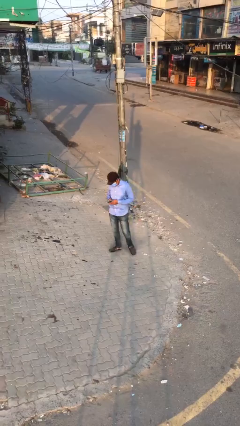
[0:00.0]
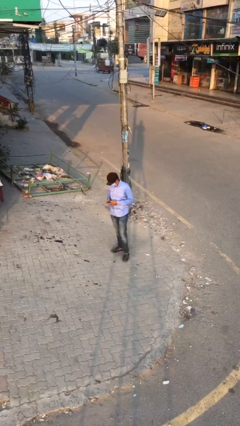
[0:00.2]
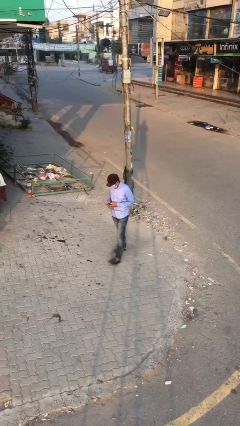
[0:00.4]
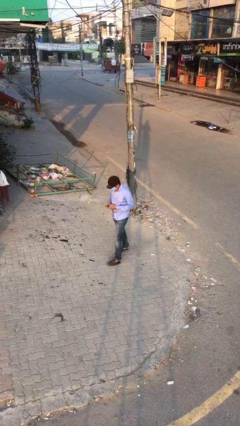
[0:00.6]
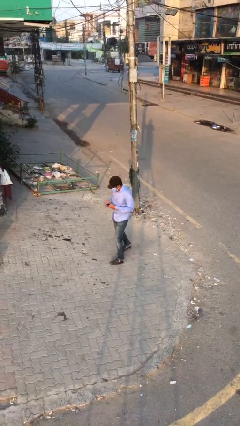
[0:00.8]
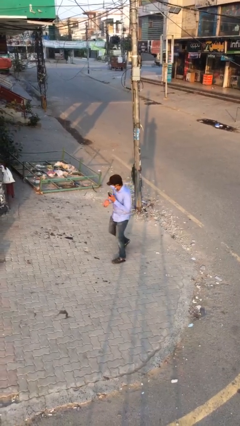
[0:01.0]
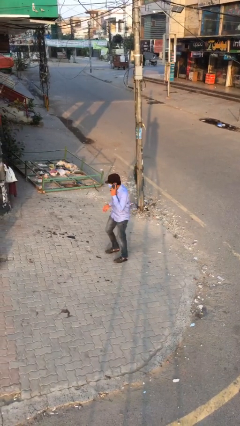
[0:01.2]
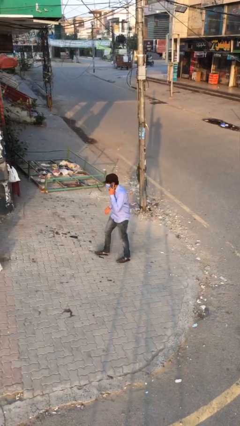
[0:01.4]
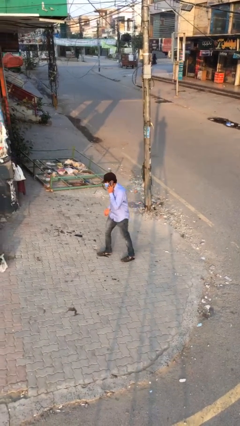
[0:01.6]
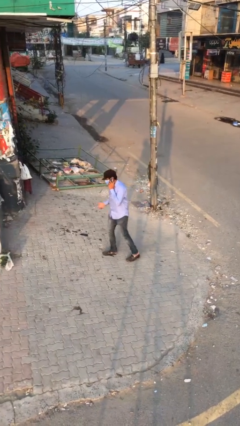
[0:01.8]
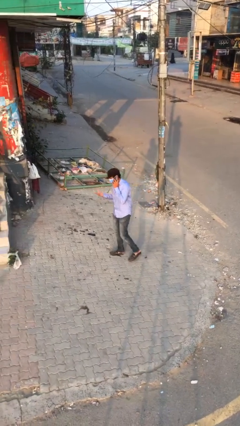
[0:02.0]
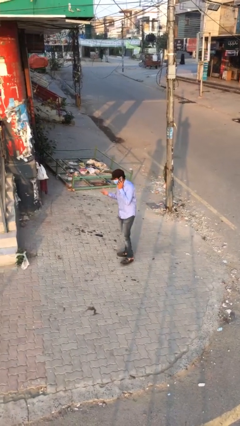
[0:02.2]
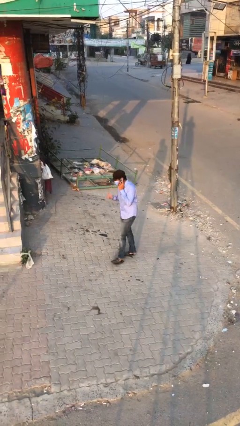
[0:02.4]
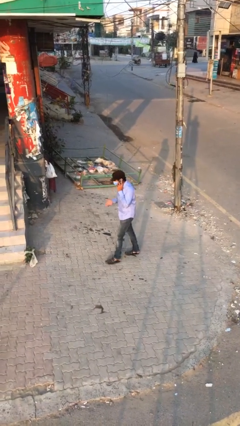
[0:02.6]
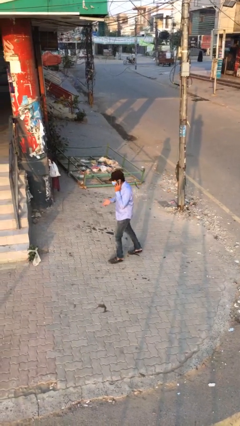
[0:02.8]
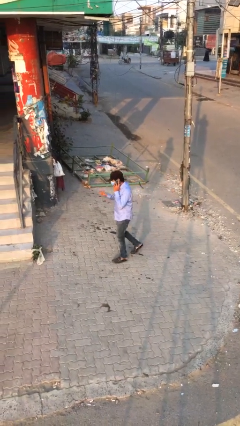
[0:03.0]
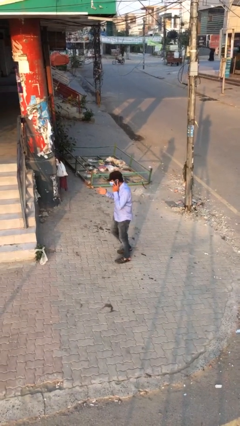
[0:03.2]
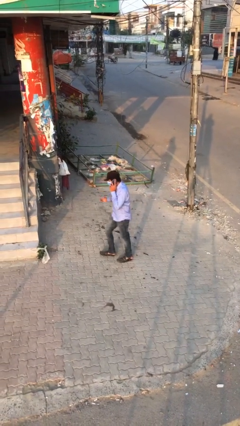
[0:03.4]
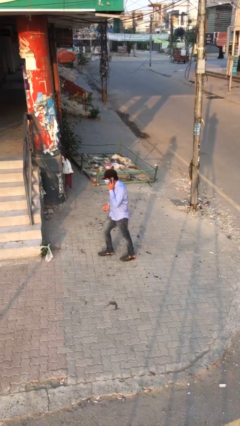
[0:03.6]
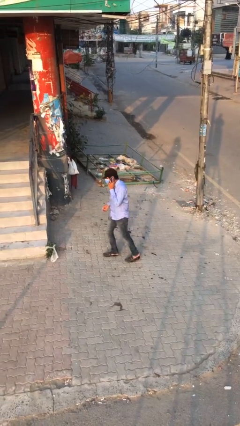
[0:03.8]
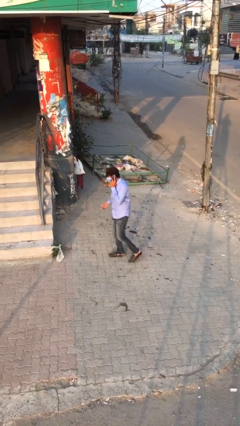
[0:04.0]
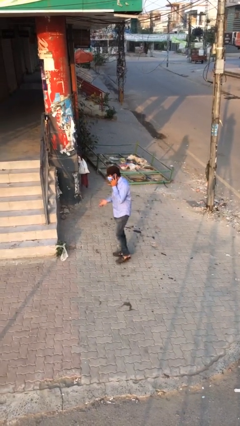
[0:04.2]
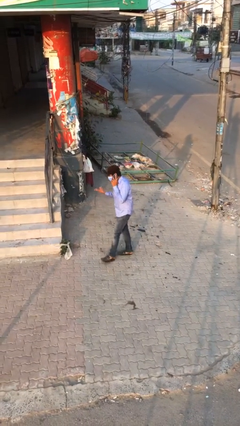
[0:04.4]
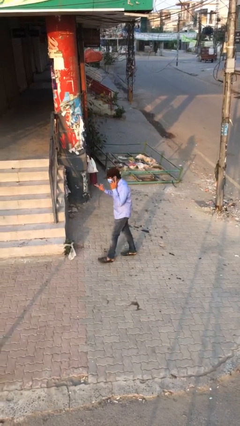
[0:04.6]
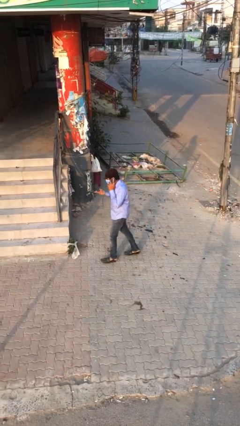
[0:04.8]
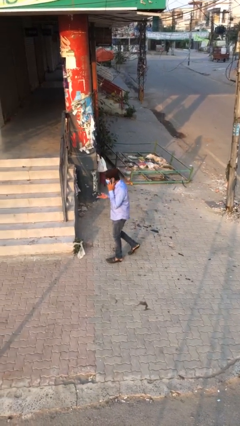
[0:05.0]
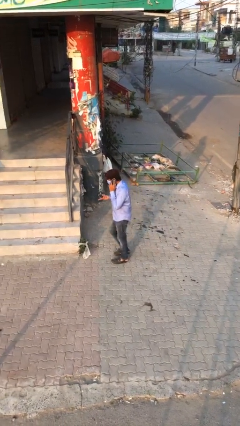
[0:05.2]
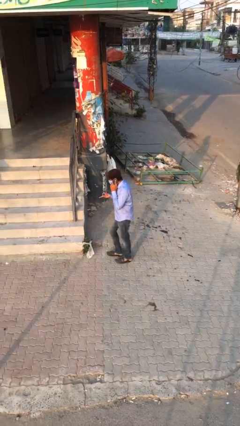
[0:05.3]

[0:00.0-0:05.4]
person talks on phone

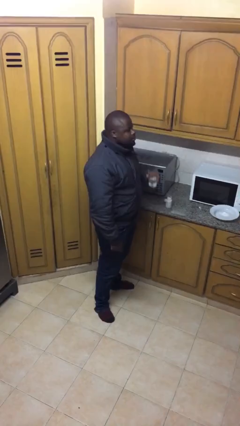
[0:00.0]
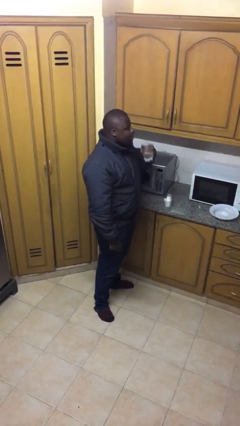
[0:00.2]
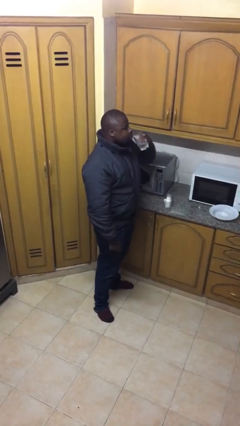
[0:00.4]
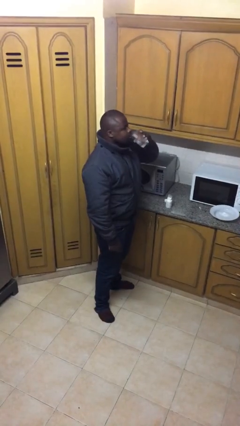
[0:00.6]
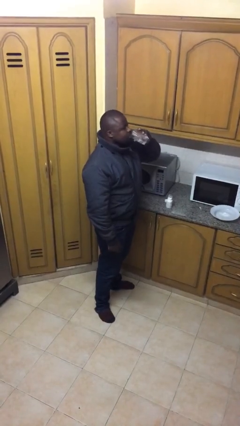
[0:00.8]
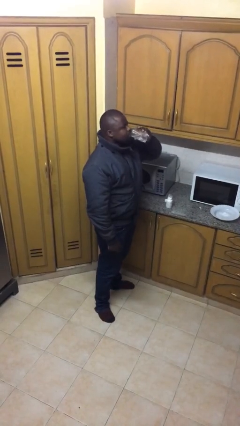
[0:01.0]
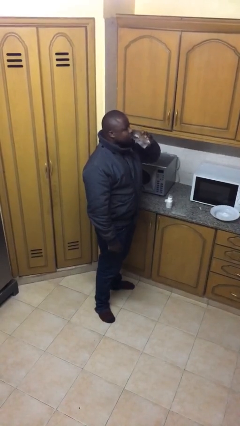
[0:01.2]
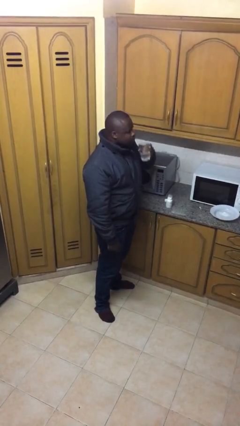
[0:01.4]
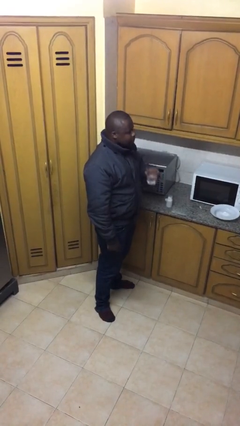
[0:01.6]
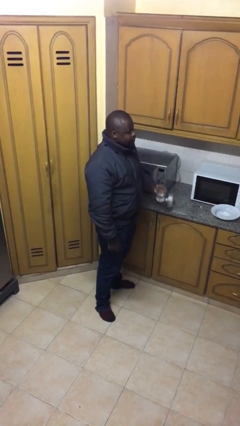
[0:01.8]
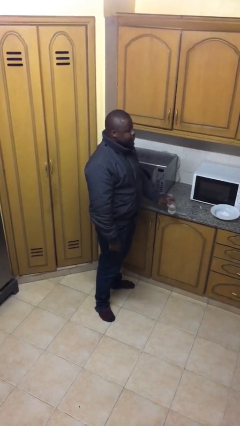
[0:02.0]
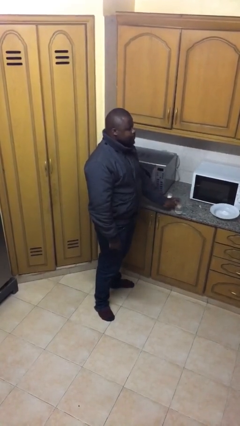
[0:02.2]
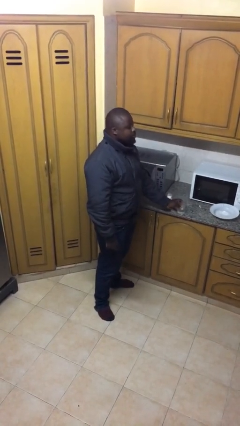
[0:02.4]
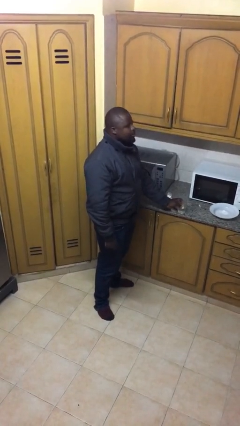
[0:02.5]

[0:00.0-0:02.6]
person drinks from cup

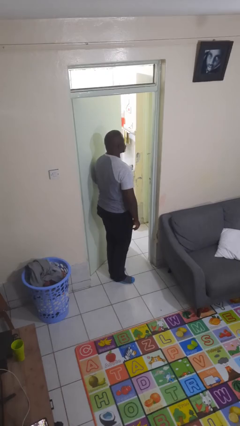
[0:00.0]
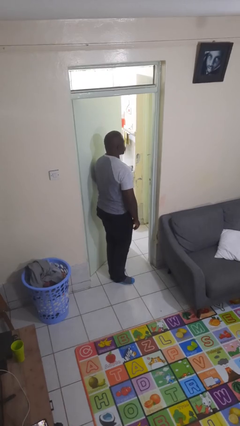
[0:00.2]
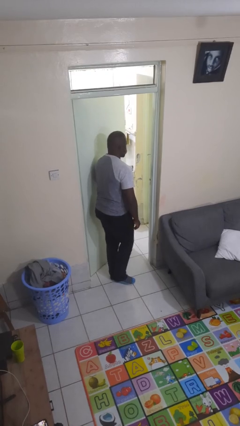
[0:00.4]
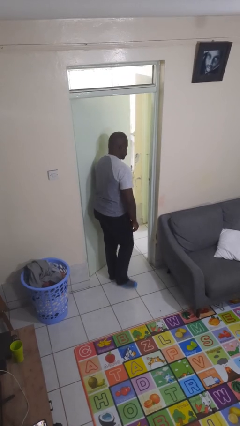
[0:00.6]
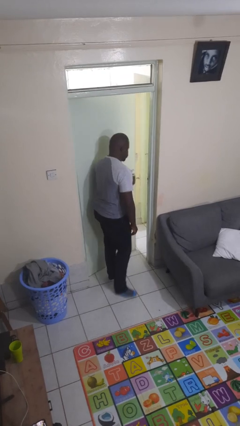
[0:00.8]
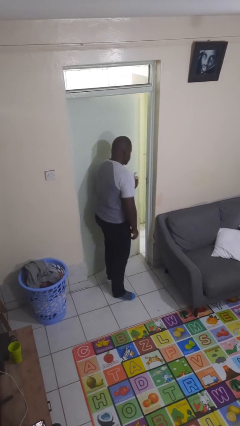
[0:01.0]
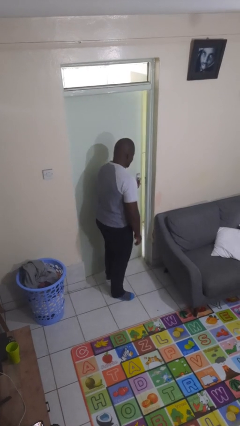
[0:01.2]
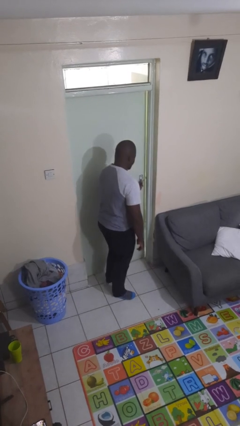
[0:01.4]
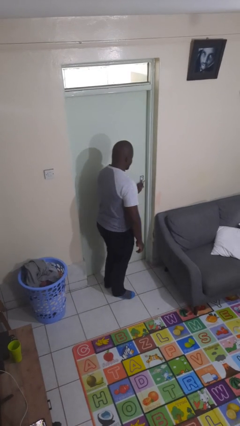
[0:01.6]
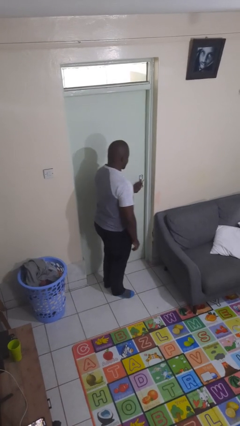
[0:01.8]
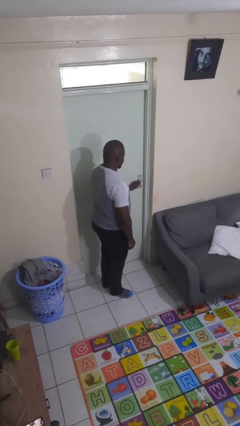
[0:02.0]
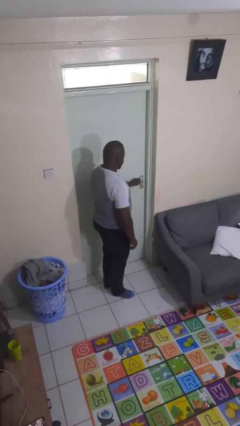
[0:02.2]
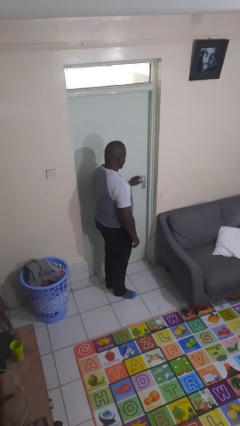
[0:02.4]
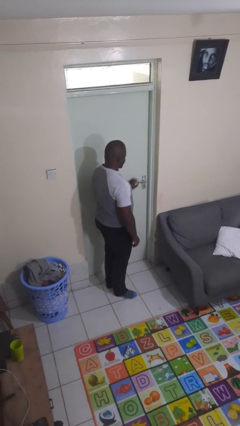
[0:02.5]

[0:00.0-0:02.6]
person closes facility door

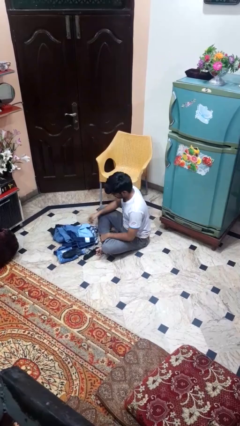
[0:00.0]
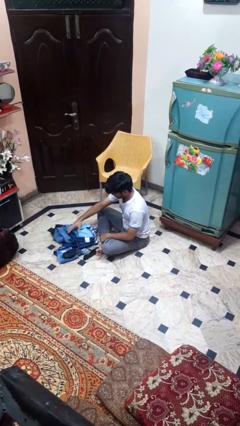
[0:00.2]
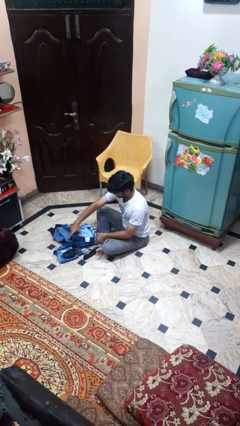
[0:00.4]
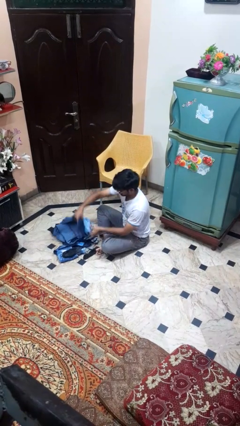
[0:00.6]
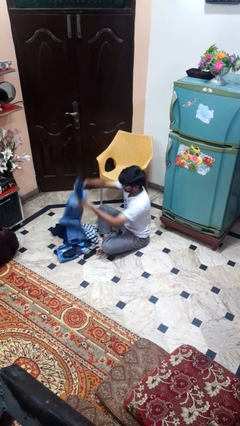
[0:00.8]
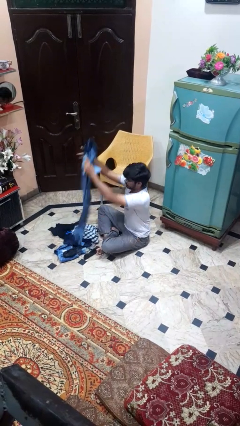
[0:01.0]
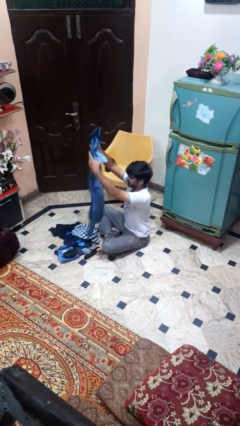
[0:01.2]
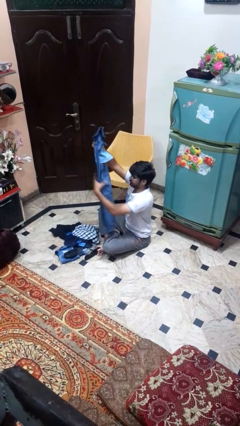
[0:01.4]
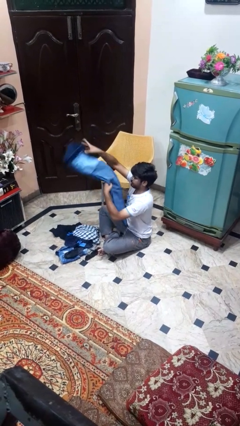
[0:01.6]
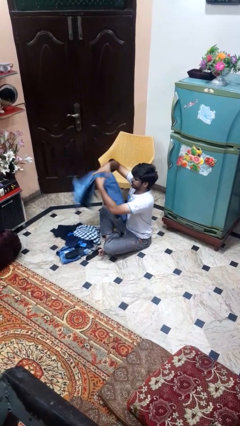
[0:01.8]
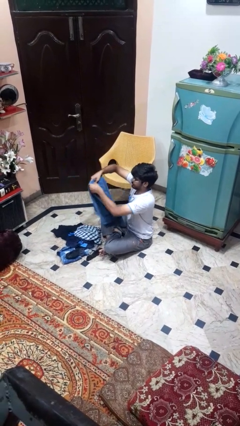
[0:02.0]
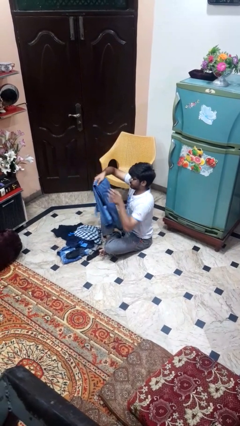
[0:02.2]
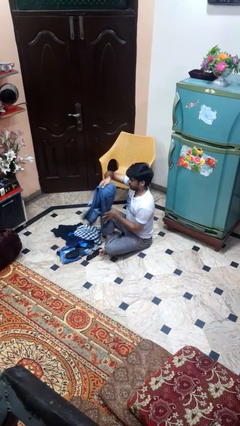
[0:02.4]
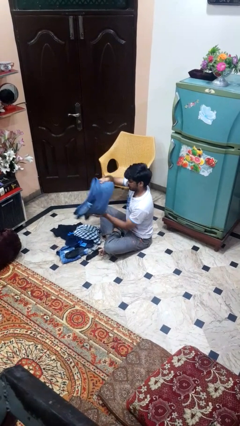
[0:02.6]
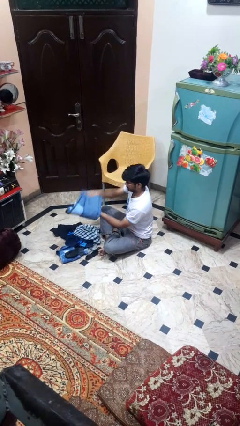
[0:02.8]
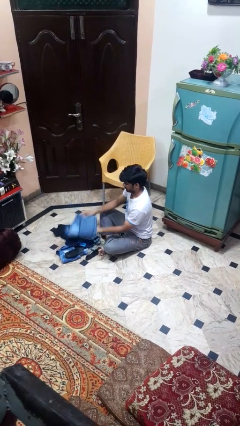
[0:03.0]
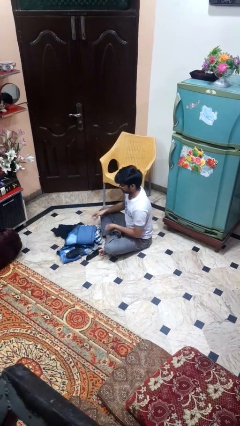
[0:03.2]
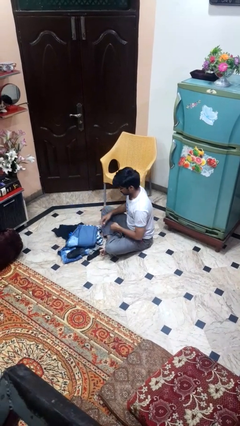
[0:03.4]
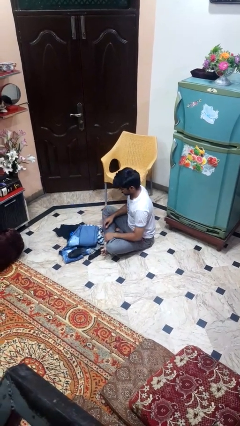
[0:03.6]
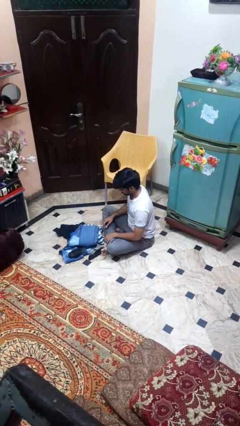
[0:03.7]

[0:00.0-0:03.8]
person folds pants

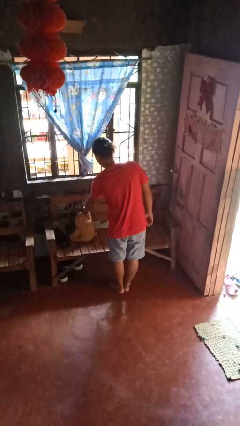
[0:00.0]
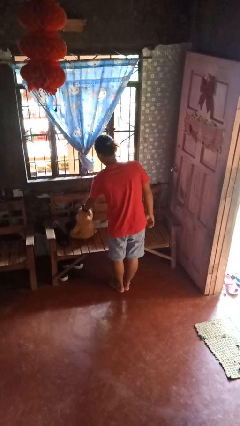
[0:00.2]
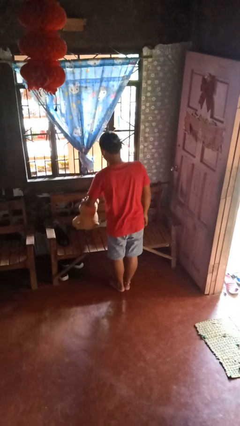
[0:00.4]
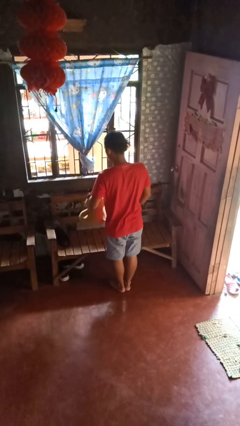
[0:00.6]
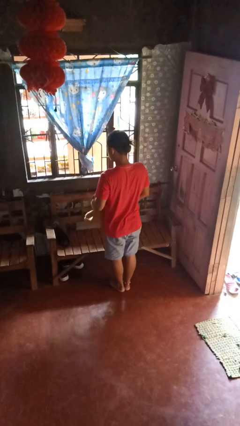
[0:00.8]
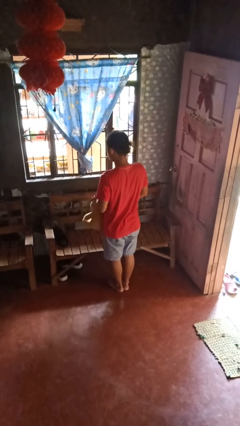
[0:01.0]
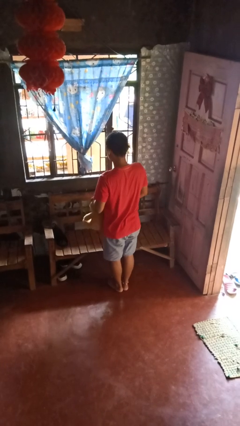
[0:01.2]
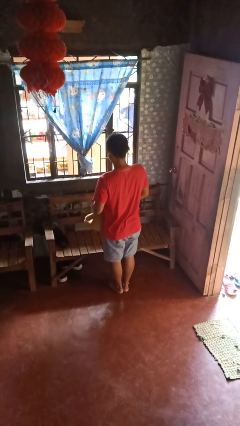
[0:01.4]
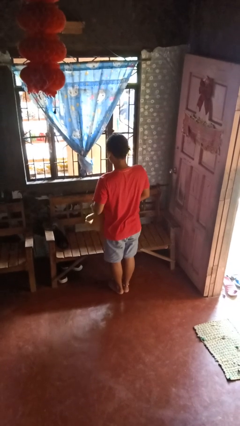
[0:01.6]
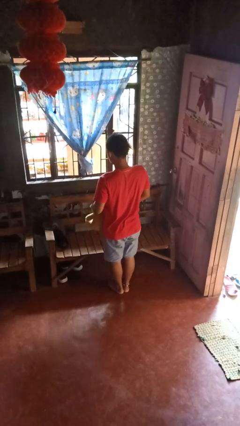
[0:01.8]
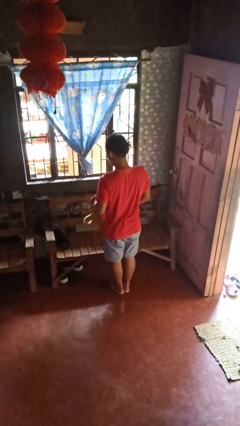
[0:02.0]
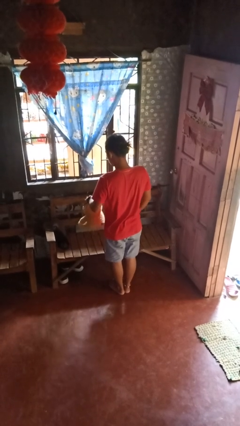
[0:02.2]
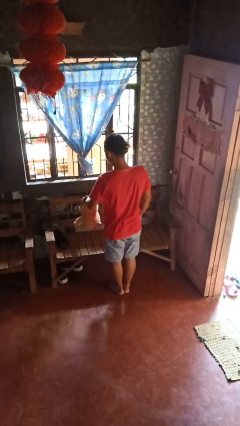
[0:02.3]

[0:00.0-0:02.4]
person picks up object from couch

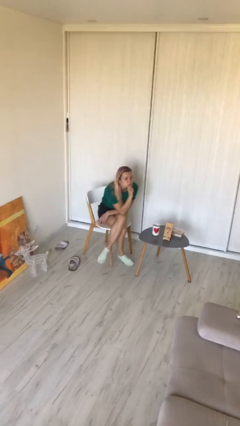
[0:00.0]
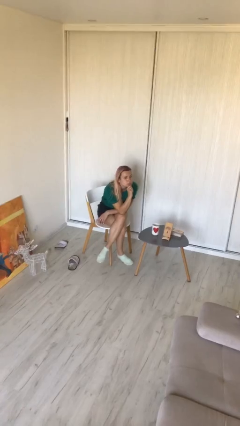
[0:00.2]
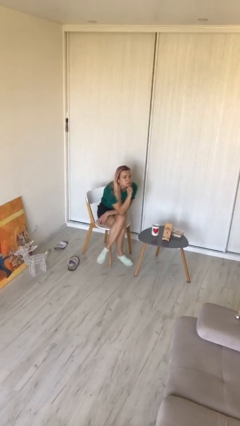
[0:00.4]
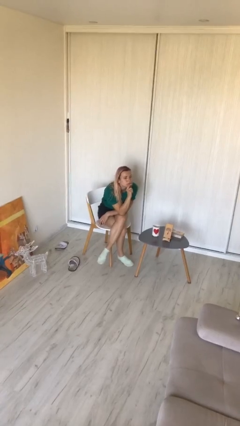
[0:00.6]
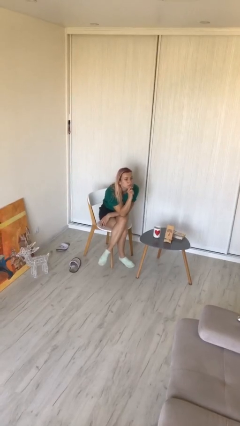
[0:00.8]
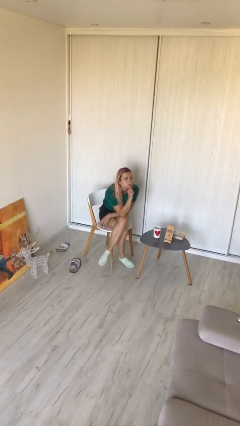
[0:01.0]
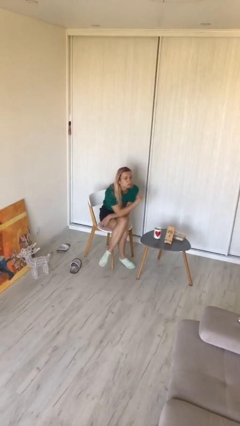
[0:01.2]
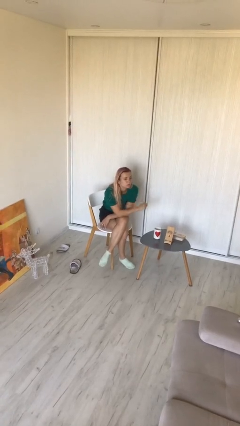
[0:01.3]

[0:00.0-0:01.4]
person strokes chin
